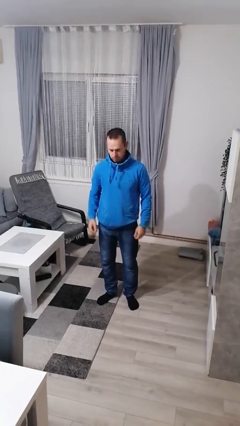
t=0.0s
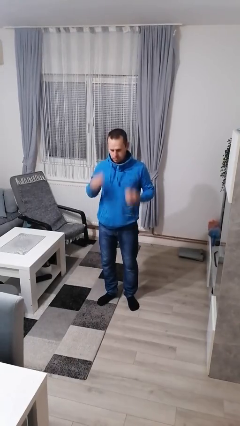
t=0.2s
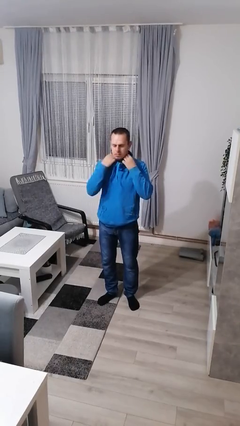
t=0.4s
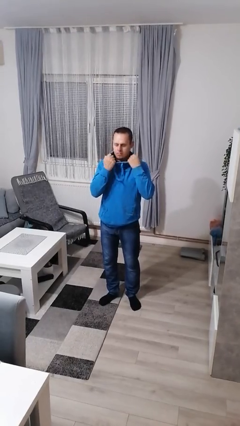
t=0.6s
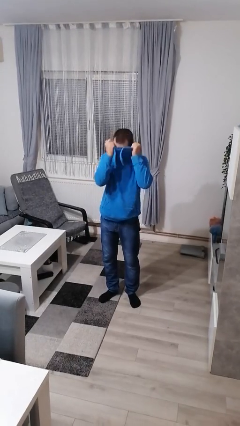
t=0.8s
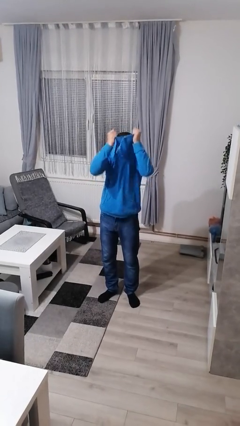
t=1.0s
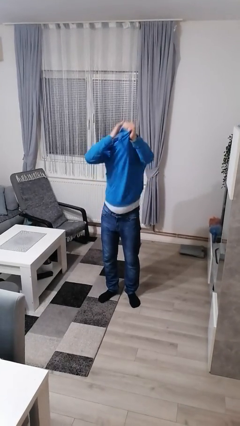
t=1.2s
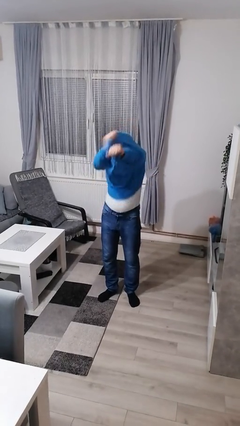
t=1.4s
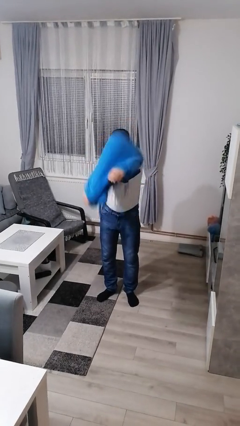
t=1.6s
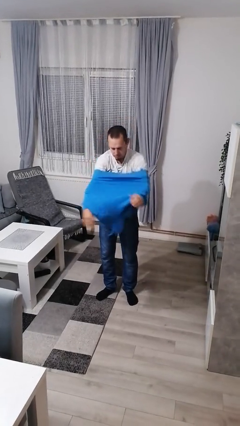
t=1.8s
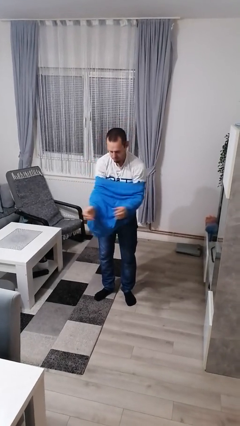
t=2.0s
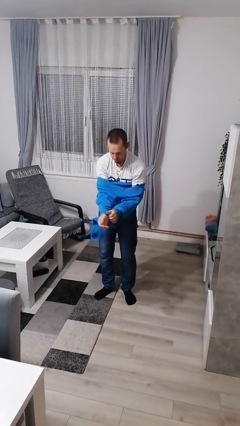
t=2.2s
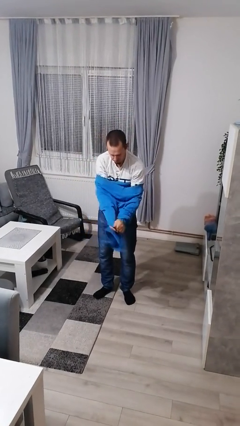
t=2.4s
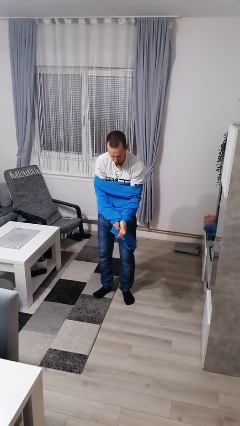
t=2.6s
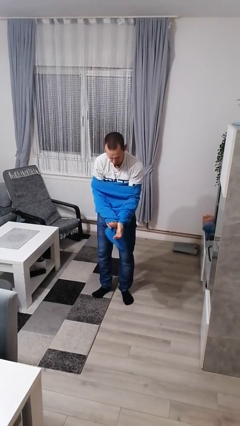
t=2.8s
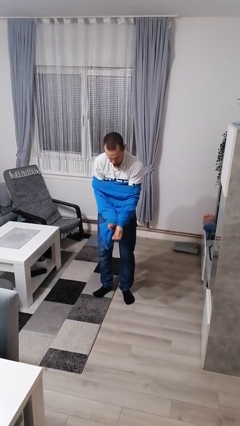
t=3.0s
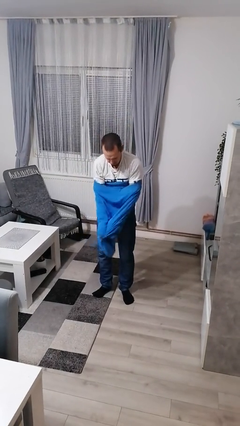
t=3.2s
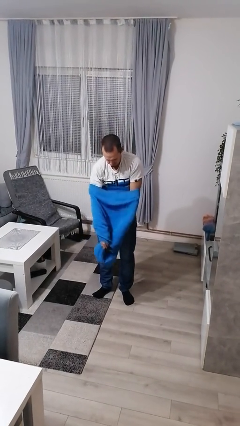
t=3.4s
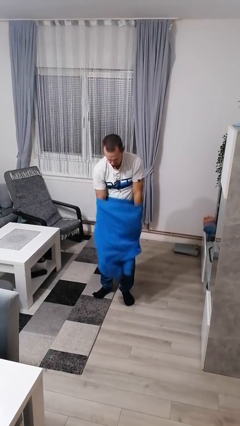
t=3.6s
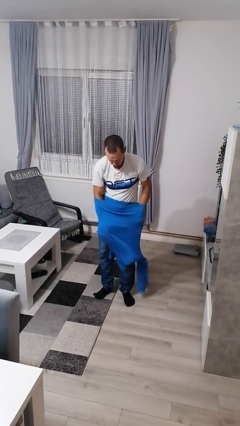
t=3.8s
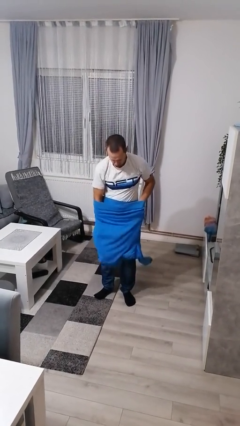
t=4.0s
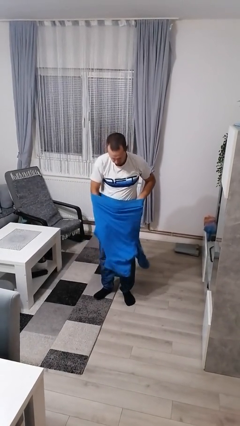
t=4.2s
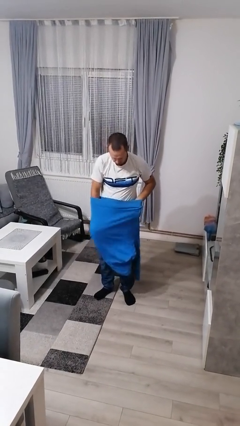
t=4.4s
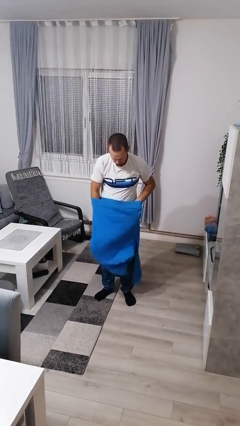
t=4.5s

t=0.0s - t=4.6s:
person takes off hoodie

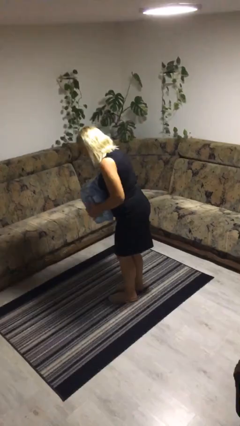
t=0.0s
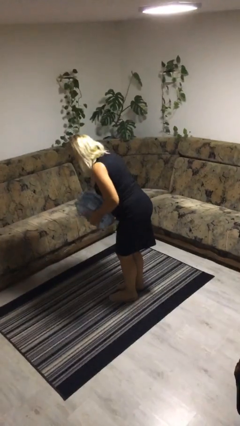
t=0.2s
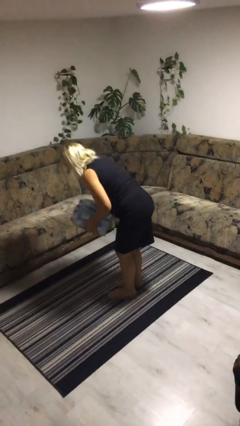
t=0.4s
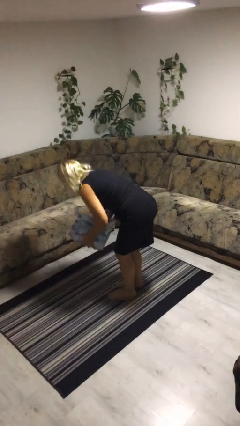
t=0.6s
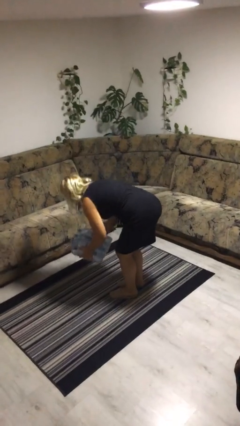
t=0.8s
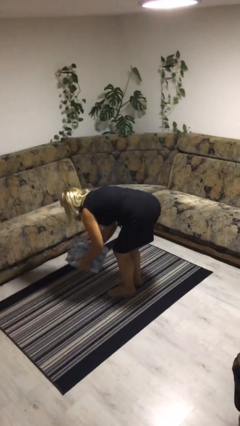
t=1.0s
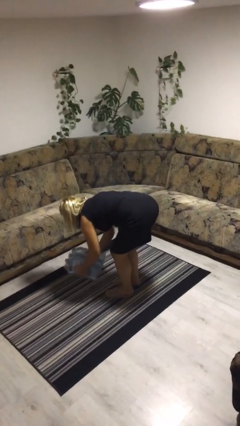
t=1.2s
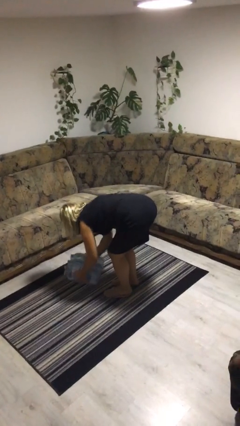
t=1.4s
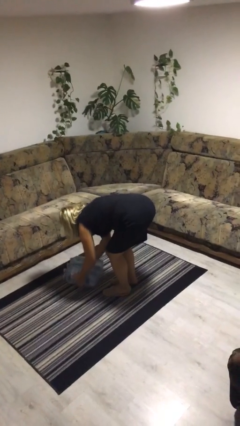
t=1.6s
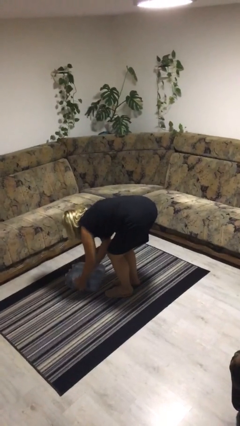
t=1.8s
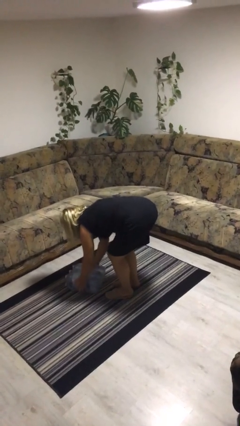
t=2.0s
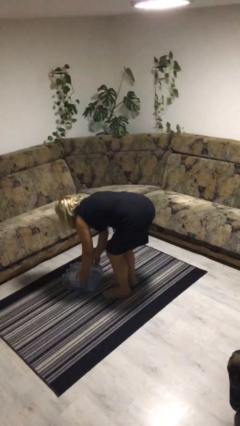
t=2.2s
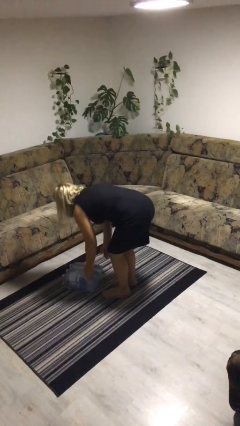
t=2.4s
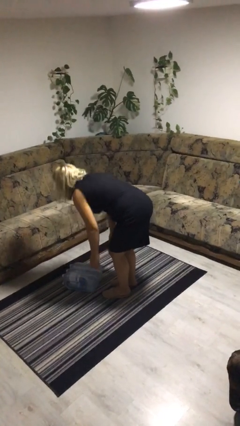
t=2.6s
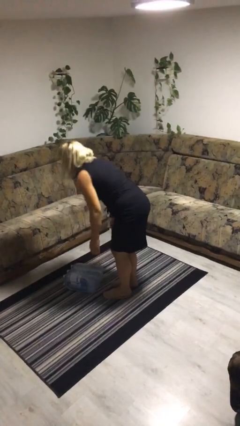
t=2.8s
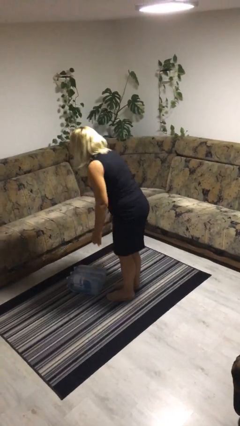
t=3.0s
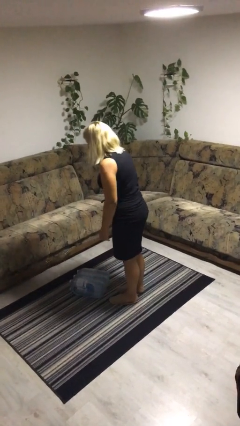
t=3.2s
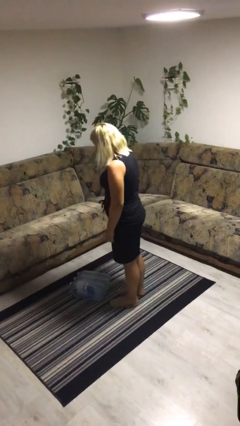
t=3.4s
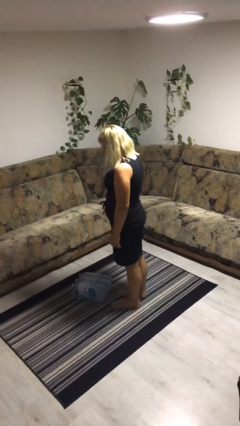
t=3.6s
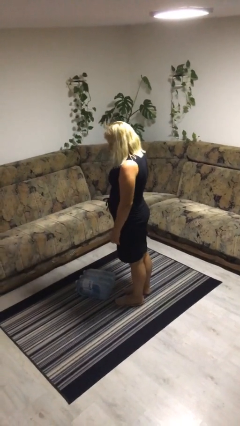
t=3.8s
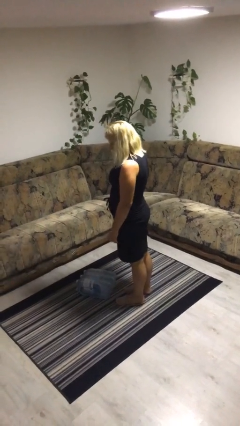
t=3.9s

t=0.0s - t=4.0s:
person puts down object on floor

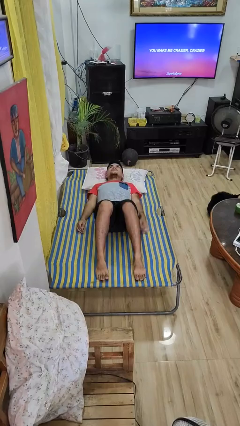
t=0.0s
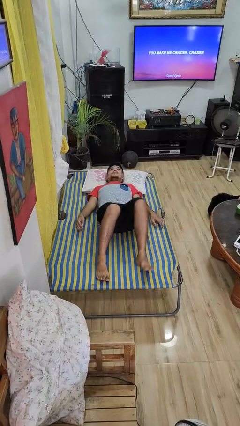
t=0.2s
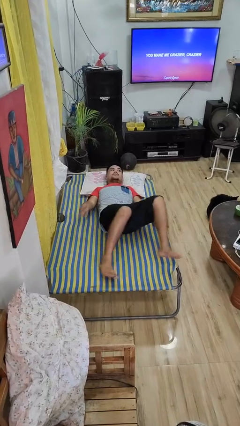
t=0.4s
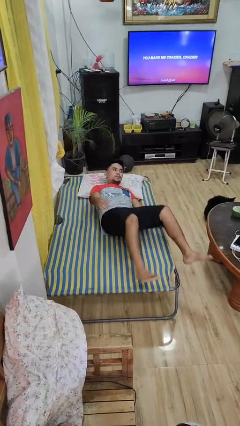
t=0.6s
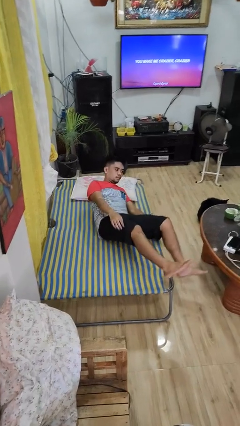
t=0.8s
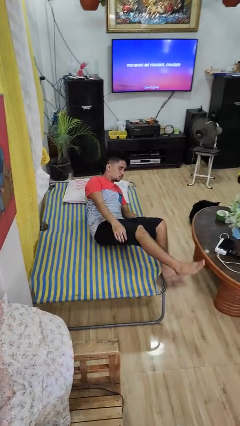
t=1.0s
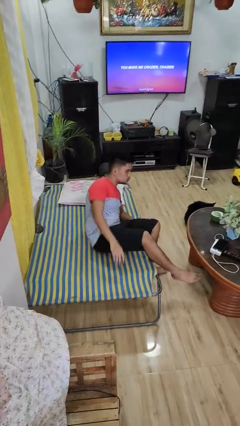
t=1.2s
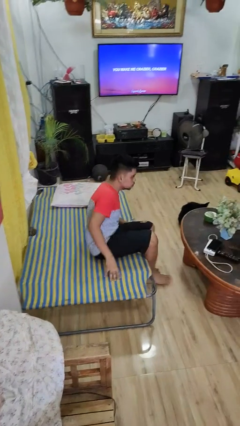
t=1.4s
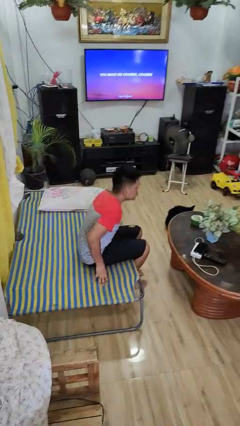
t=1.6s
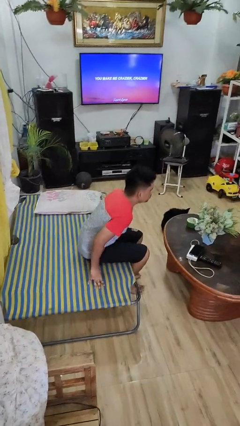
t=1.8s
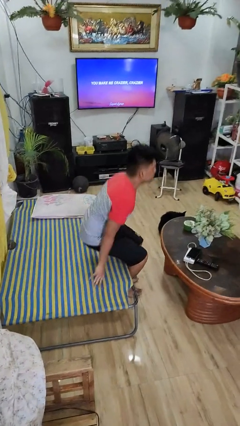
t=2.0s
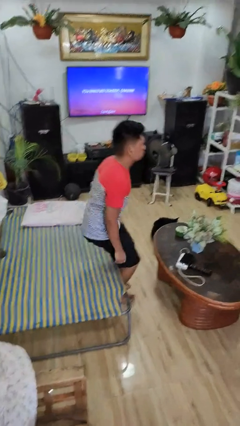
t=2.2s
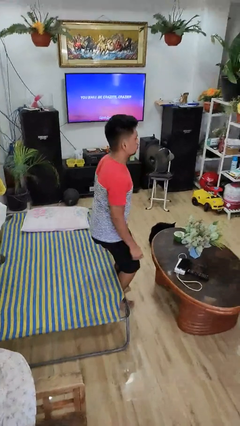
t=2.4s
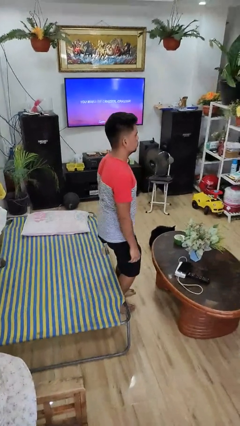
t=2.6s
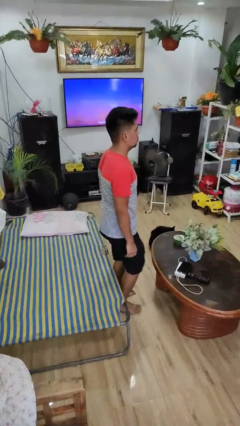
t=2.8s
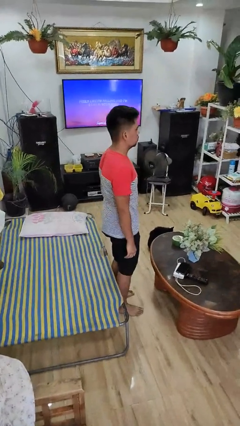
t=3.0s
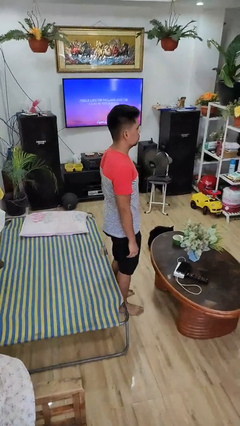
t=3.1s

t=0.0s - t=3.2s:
person stands up

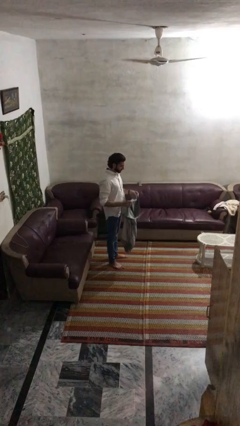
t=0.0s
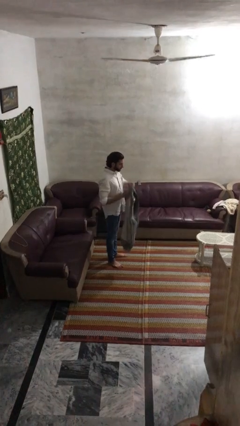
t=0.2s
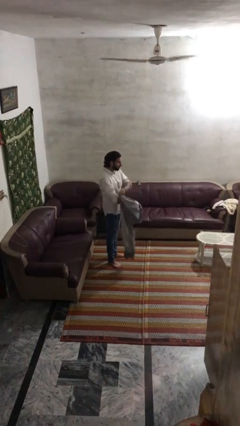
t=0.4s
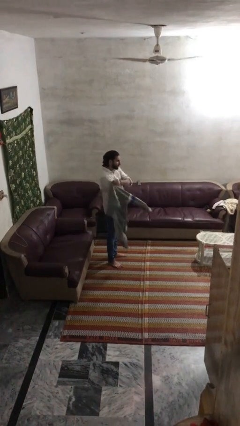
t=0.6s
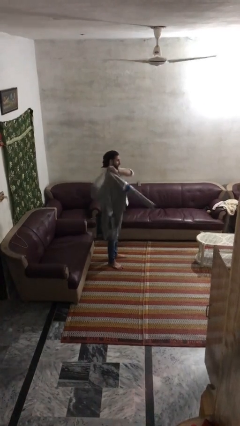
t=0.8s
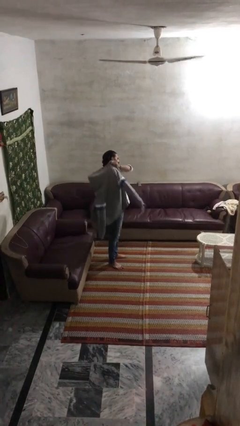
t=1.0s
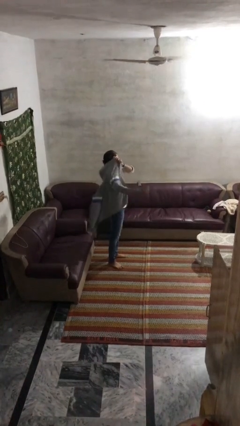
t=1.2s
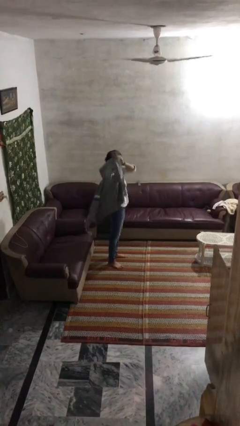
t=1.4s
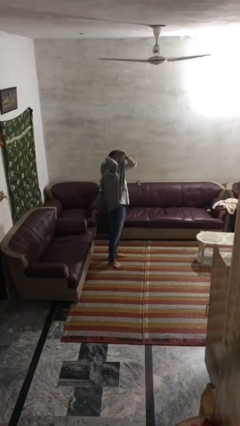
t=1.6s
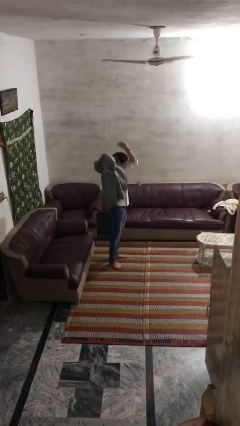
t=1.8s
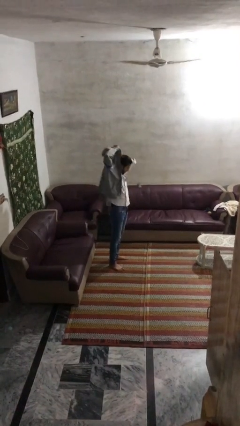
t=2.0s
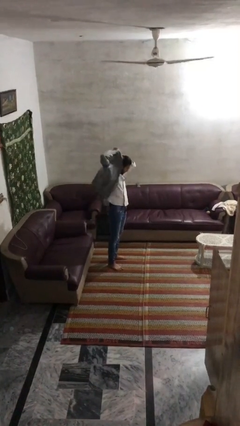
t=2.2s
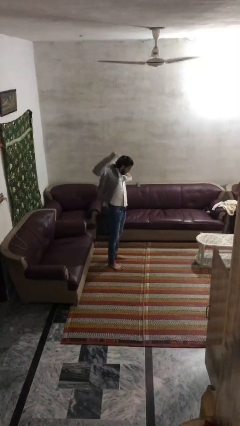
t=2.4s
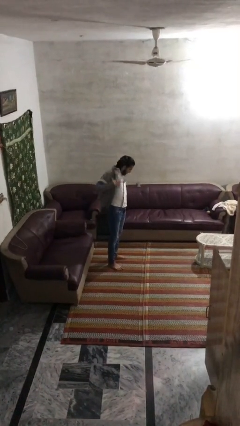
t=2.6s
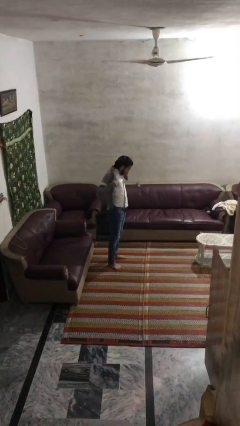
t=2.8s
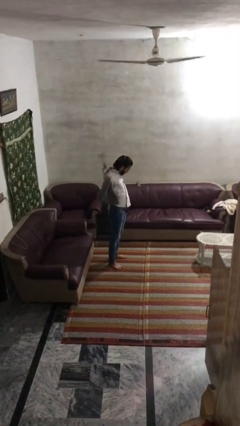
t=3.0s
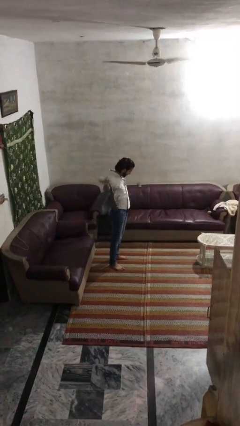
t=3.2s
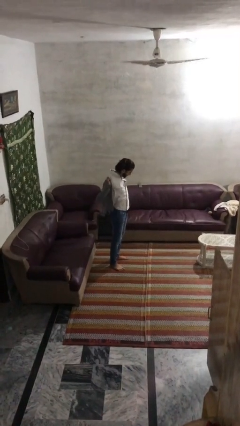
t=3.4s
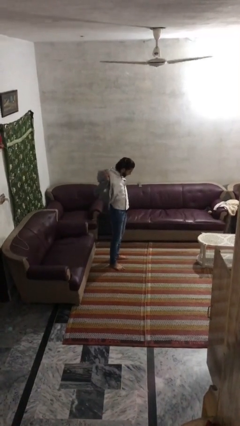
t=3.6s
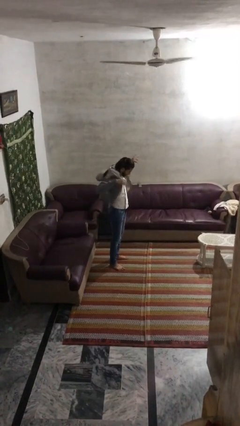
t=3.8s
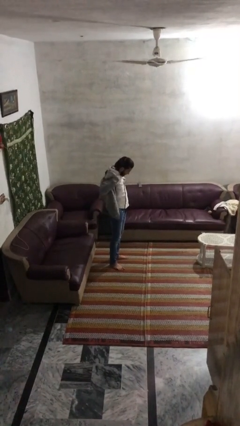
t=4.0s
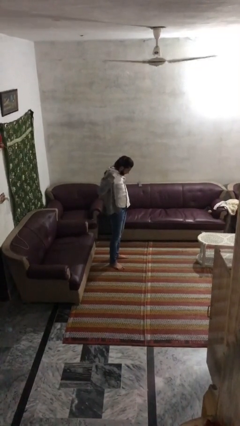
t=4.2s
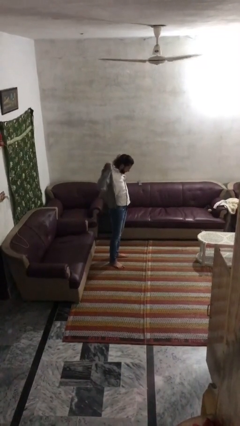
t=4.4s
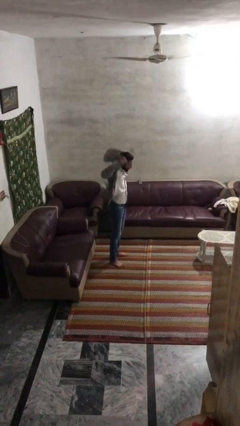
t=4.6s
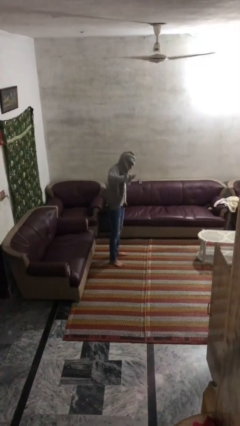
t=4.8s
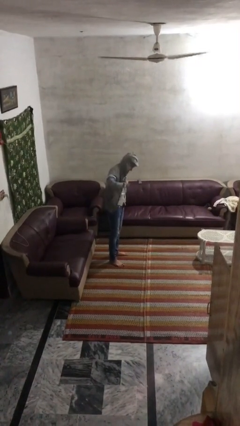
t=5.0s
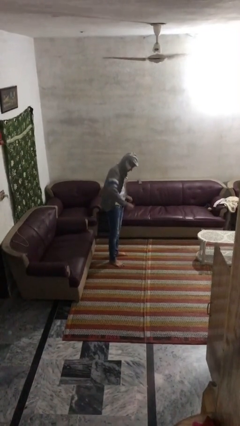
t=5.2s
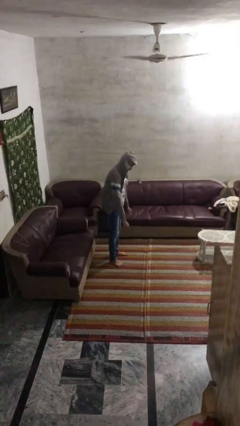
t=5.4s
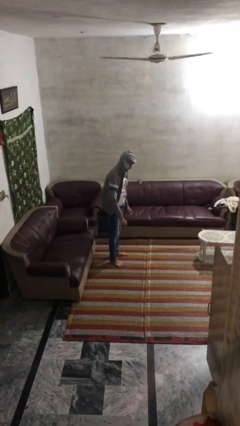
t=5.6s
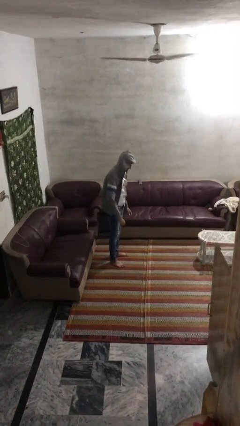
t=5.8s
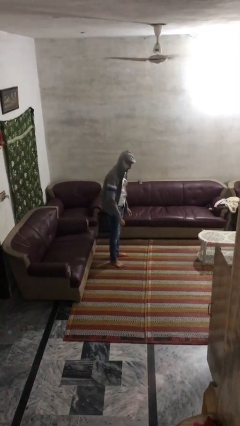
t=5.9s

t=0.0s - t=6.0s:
person puts on hoodie
